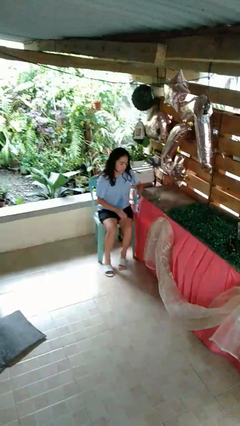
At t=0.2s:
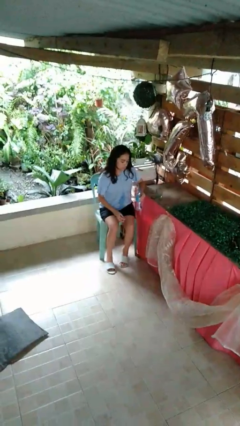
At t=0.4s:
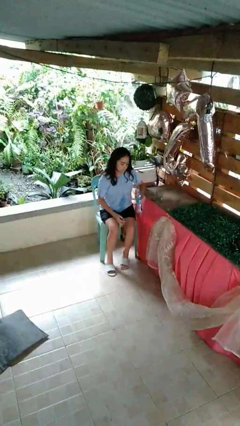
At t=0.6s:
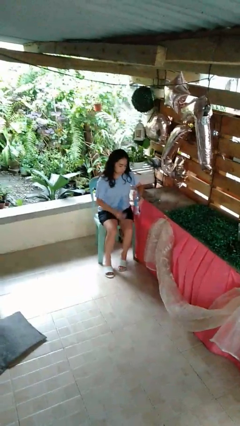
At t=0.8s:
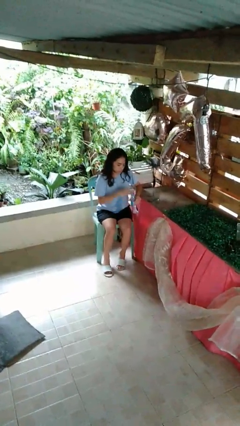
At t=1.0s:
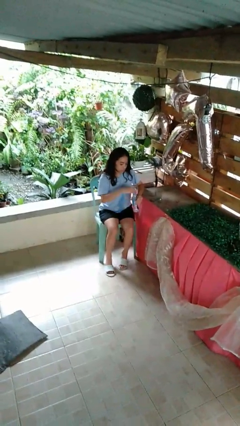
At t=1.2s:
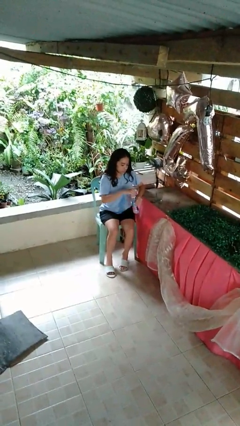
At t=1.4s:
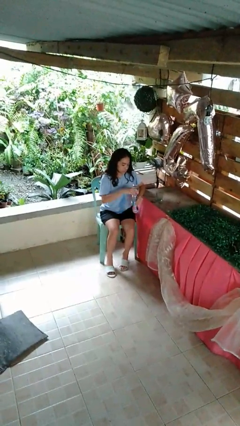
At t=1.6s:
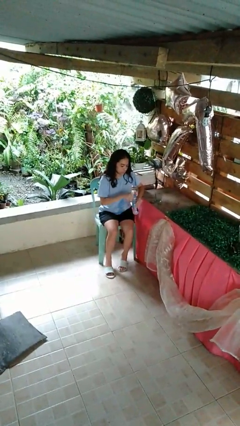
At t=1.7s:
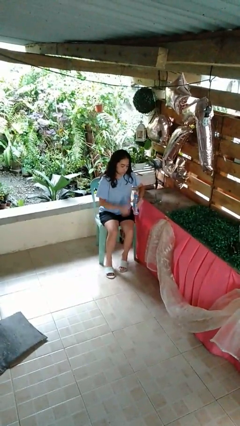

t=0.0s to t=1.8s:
person screws lid to bottle

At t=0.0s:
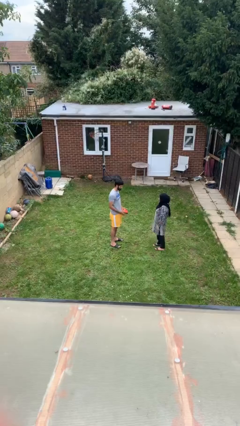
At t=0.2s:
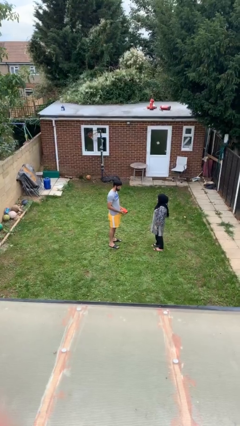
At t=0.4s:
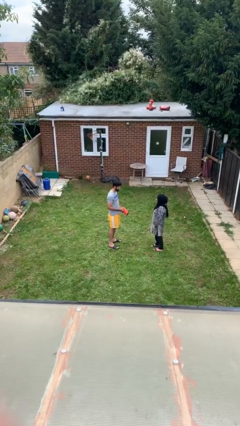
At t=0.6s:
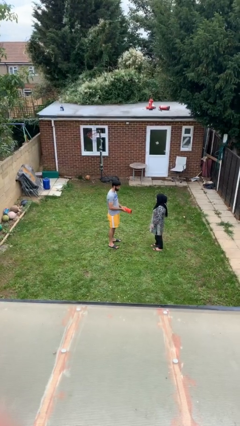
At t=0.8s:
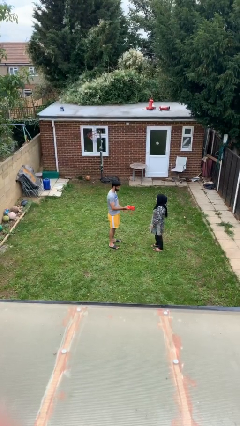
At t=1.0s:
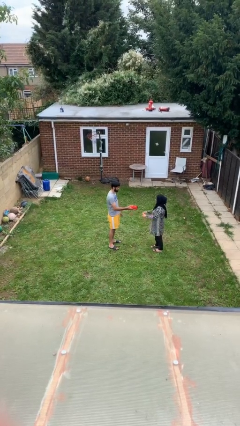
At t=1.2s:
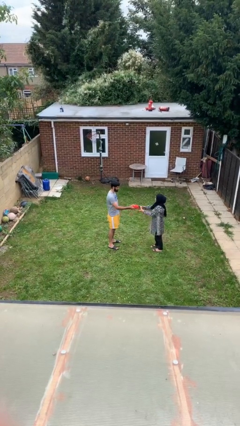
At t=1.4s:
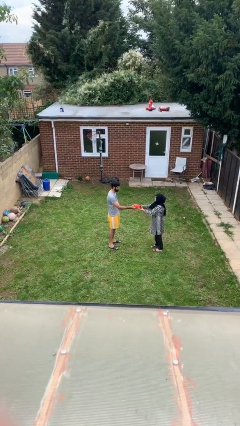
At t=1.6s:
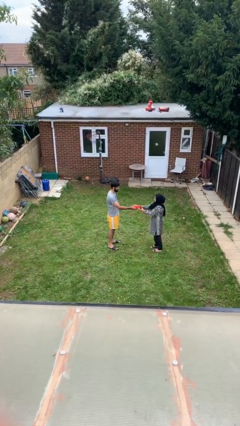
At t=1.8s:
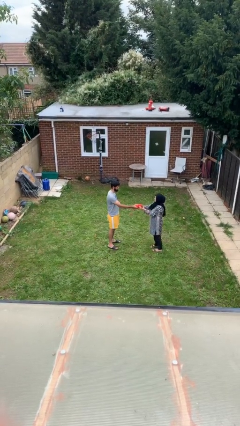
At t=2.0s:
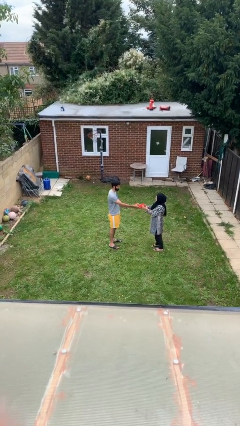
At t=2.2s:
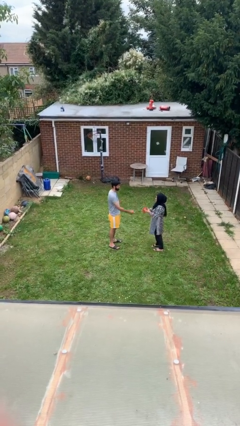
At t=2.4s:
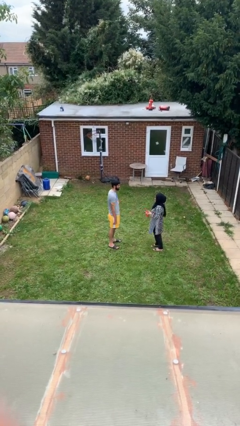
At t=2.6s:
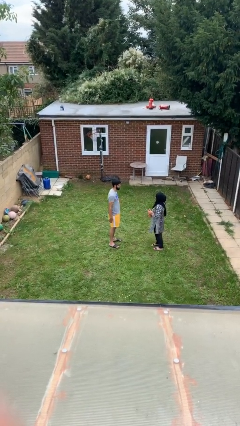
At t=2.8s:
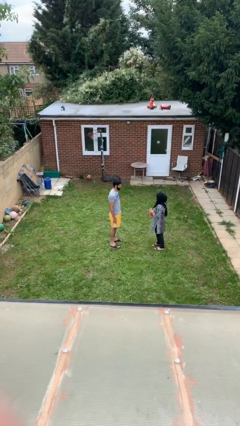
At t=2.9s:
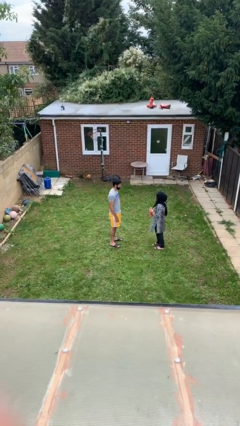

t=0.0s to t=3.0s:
person transfers object to person

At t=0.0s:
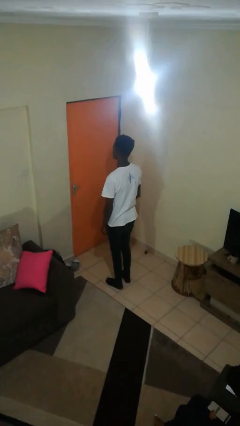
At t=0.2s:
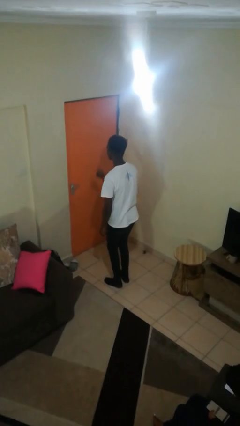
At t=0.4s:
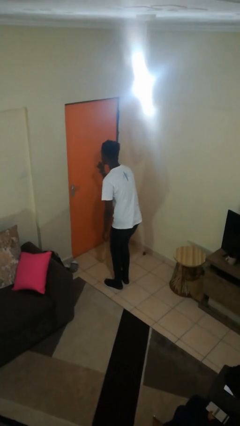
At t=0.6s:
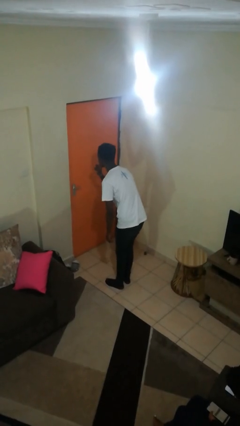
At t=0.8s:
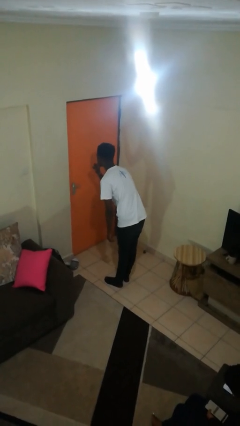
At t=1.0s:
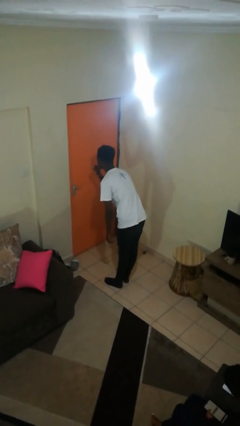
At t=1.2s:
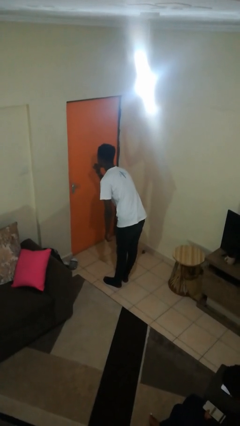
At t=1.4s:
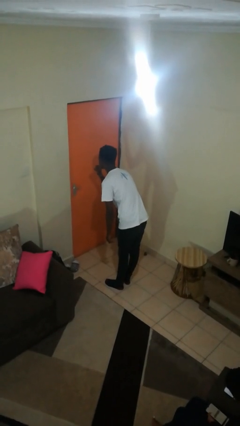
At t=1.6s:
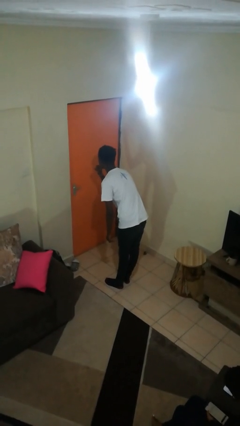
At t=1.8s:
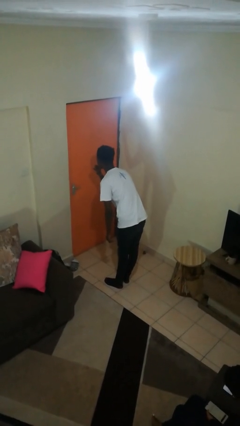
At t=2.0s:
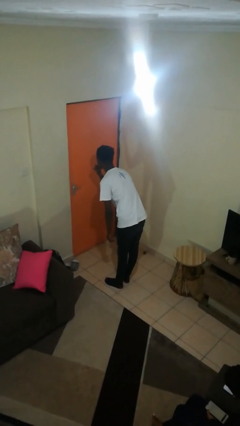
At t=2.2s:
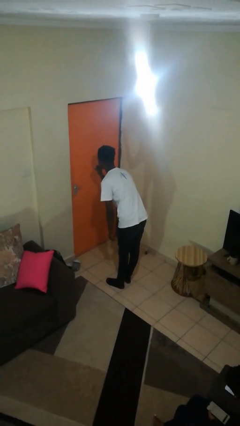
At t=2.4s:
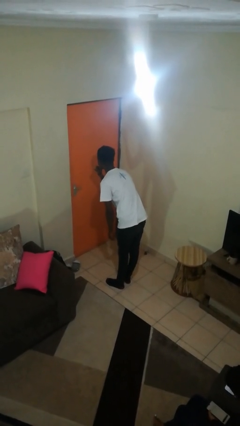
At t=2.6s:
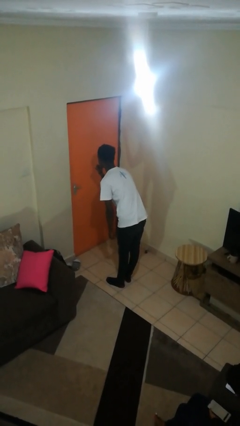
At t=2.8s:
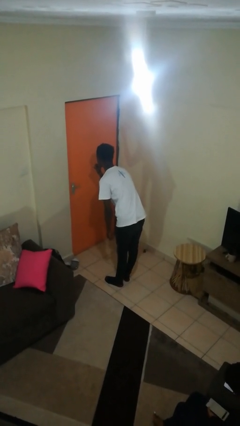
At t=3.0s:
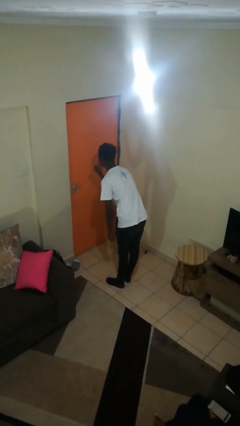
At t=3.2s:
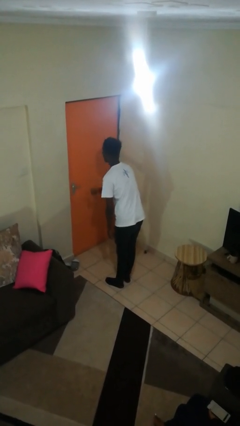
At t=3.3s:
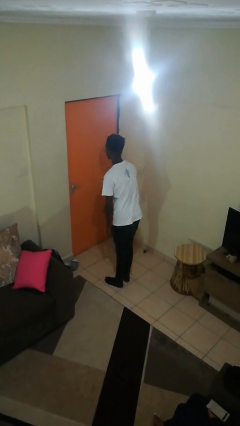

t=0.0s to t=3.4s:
person gestures be quiet

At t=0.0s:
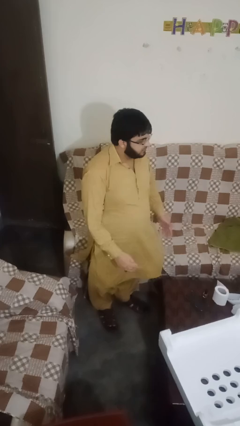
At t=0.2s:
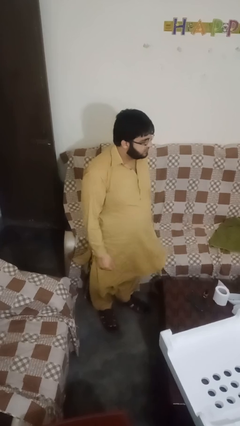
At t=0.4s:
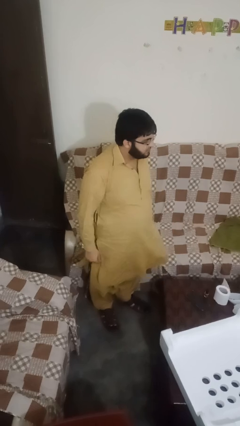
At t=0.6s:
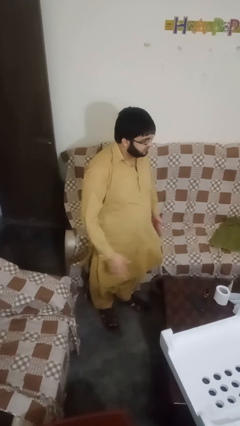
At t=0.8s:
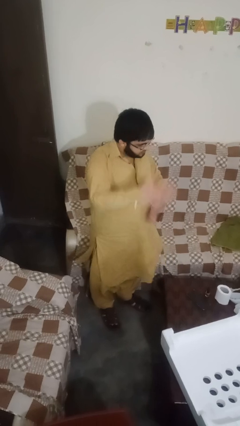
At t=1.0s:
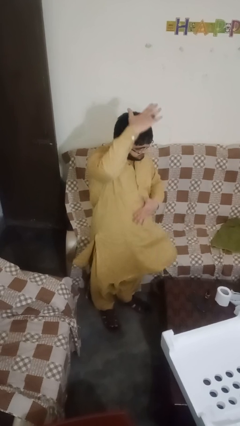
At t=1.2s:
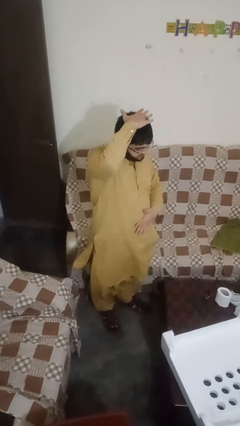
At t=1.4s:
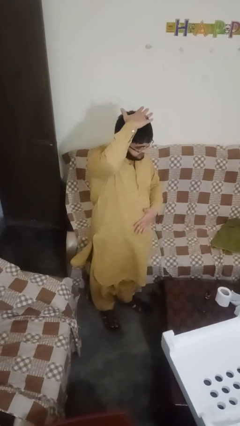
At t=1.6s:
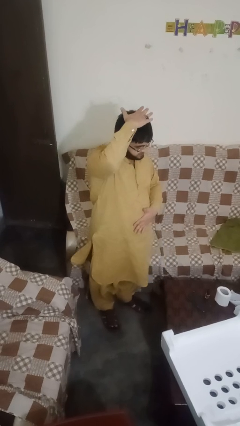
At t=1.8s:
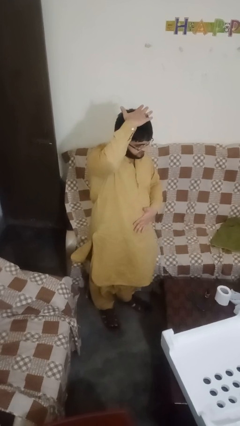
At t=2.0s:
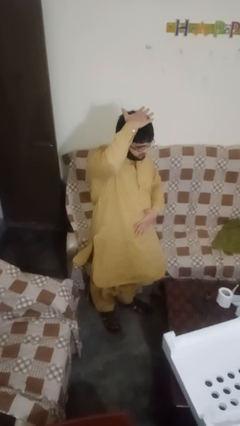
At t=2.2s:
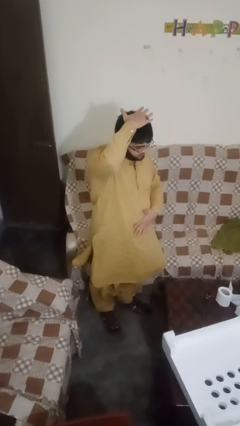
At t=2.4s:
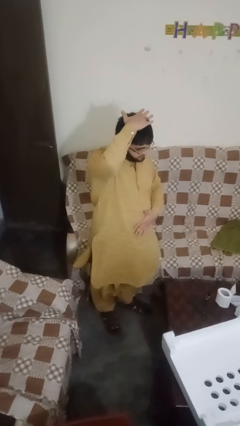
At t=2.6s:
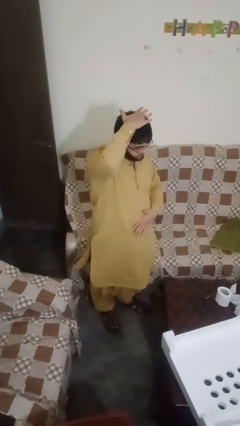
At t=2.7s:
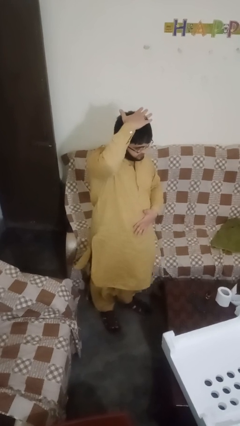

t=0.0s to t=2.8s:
person pats head

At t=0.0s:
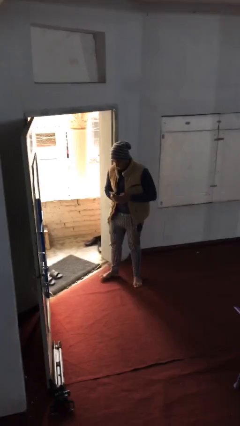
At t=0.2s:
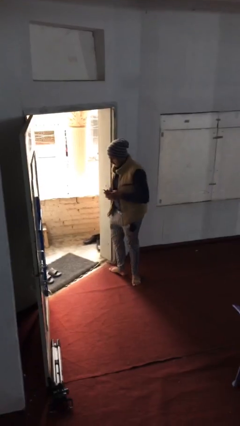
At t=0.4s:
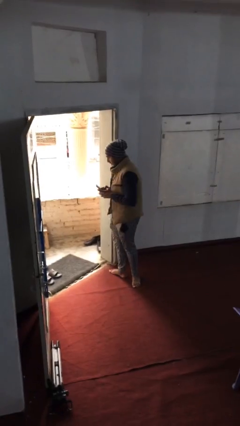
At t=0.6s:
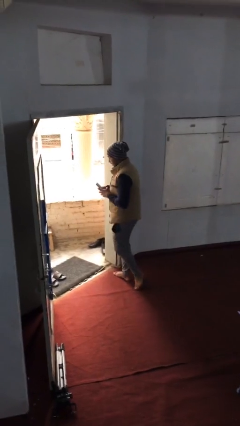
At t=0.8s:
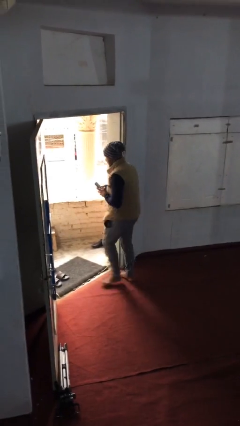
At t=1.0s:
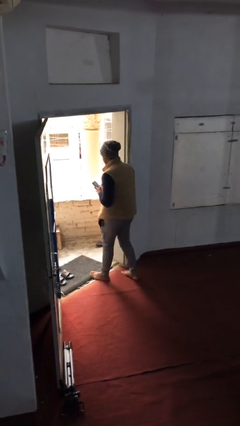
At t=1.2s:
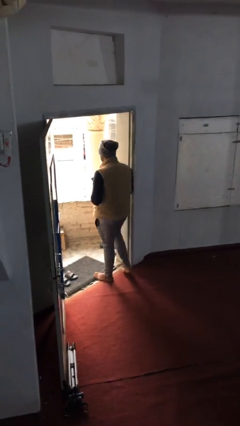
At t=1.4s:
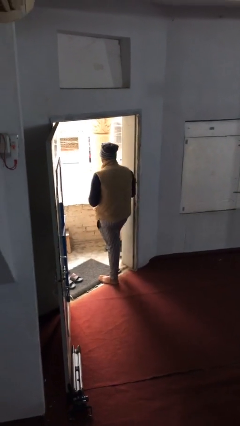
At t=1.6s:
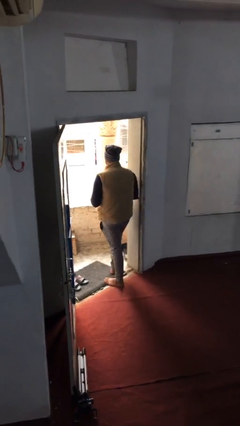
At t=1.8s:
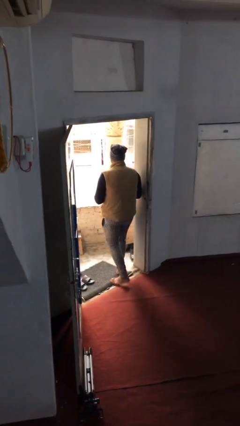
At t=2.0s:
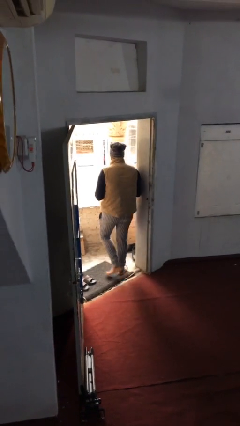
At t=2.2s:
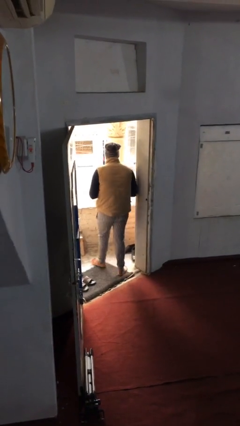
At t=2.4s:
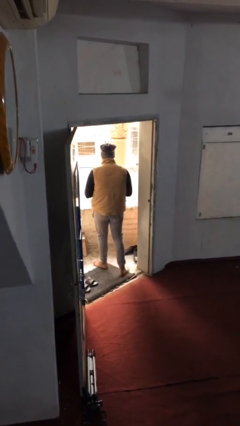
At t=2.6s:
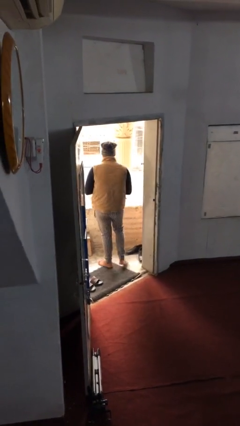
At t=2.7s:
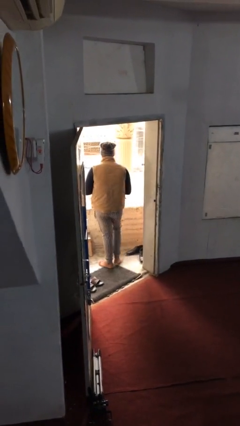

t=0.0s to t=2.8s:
person exits scene through structure

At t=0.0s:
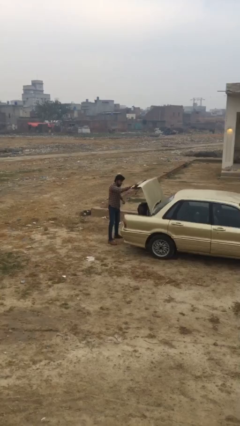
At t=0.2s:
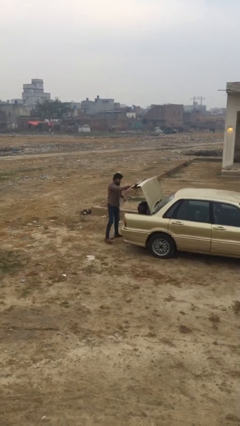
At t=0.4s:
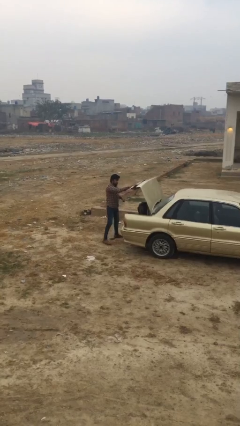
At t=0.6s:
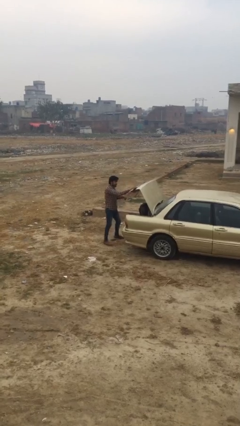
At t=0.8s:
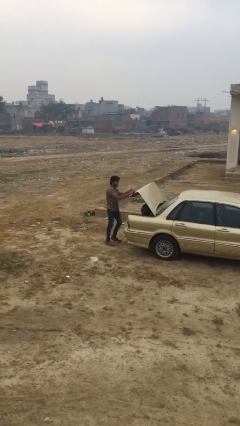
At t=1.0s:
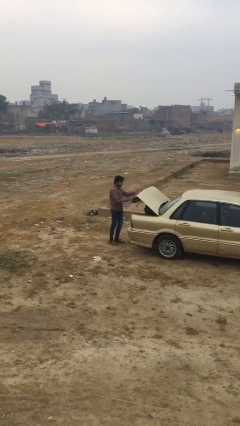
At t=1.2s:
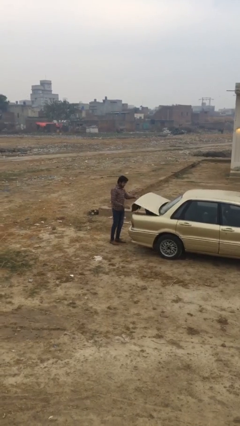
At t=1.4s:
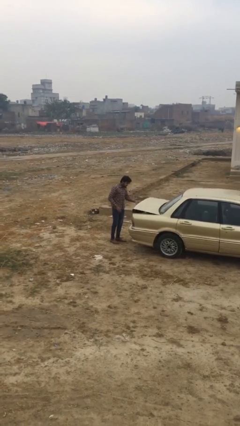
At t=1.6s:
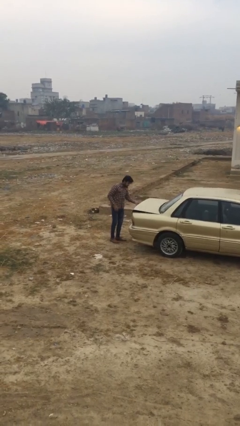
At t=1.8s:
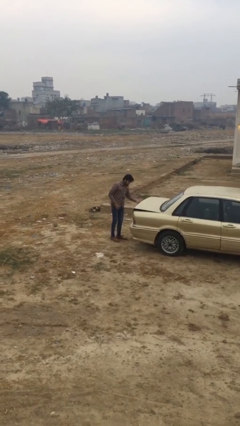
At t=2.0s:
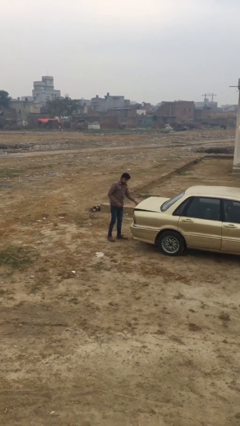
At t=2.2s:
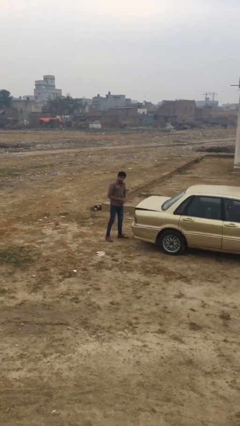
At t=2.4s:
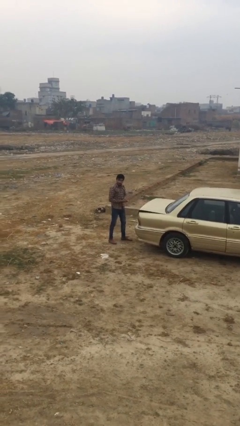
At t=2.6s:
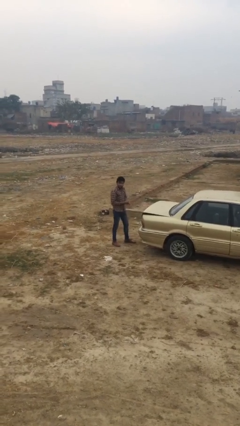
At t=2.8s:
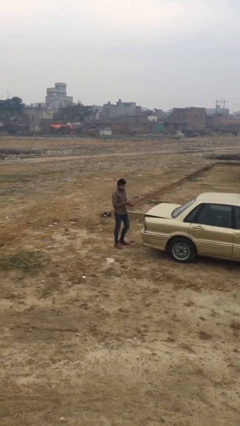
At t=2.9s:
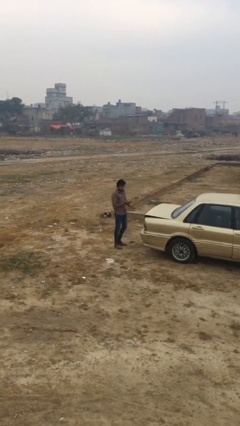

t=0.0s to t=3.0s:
person closes car trunk
